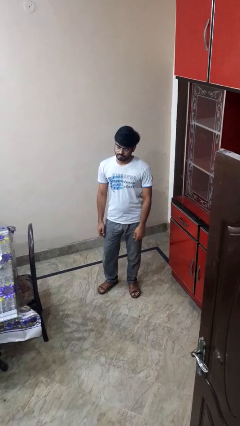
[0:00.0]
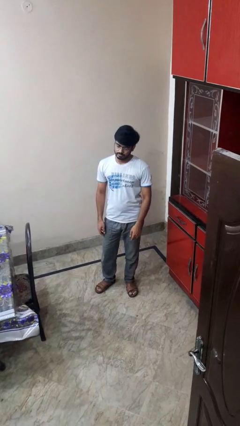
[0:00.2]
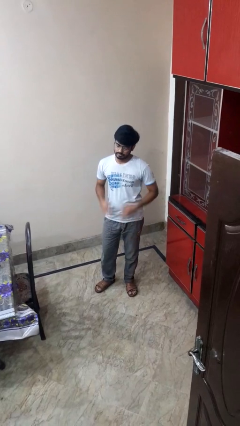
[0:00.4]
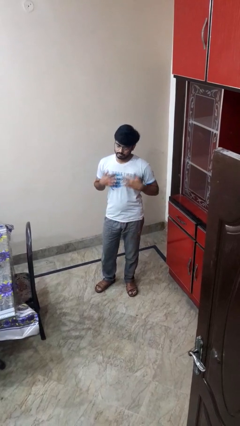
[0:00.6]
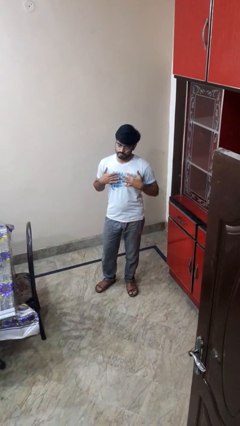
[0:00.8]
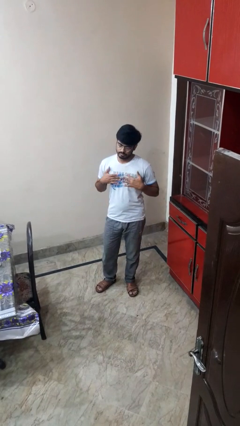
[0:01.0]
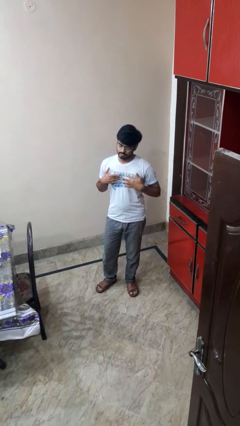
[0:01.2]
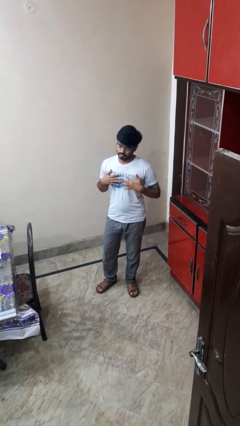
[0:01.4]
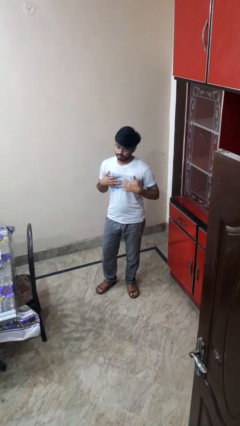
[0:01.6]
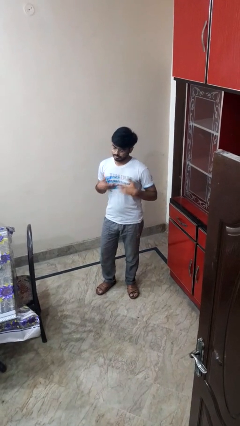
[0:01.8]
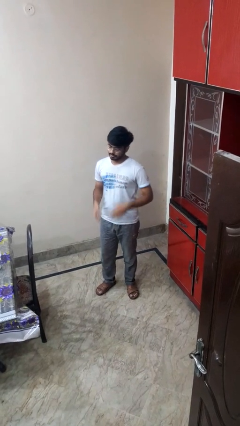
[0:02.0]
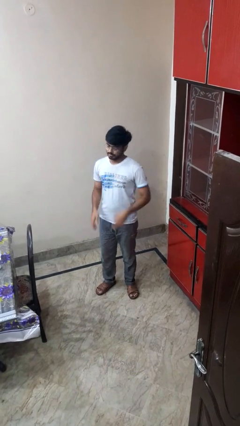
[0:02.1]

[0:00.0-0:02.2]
person drums on chest

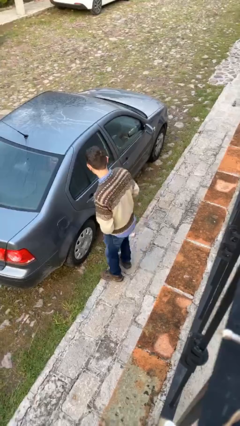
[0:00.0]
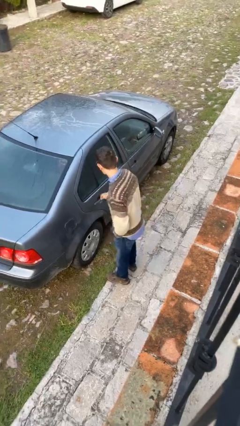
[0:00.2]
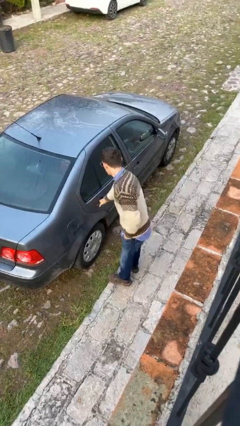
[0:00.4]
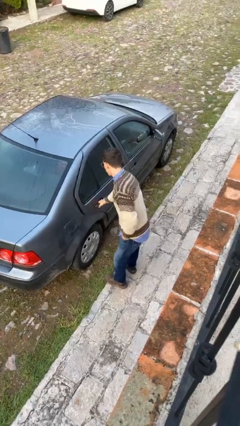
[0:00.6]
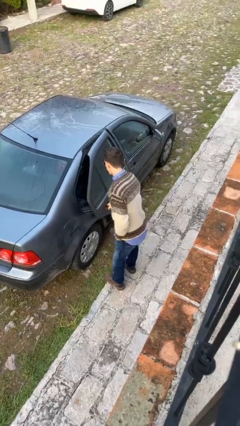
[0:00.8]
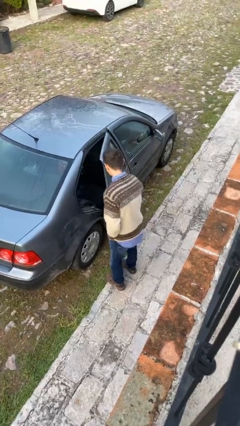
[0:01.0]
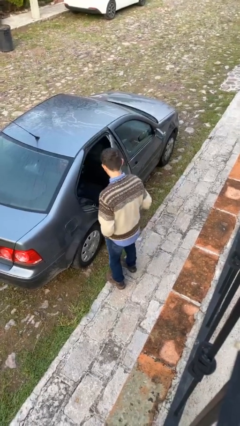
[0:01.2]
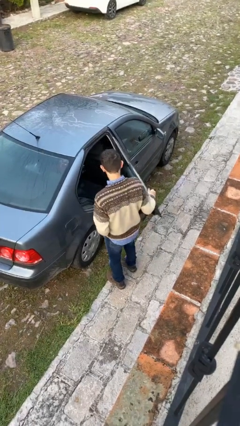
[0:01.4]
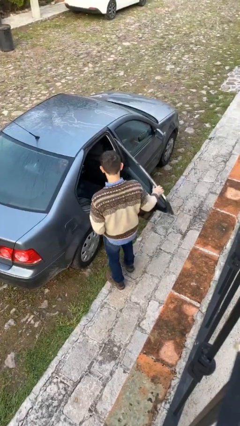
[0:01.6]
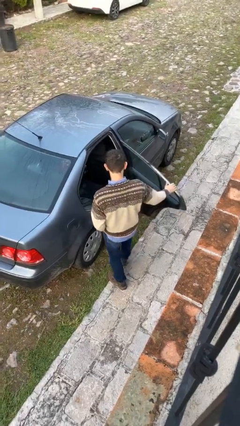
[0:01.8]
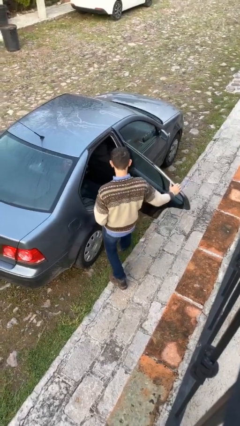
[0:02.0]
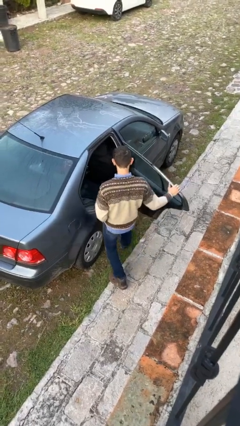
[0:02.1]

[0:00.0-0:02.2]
person opens car door

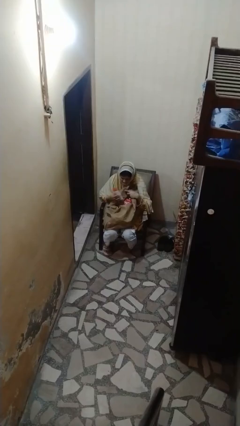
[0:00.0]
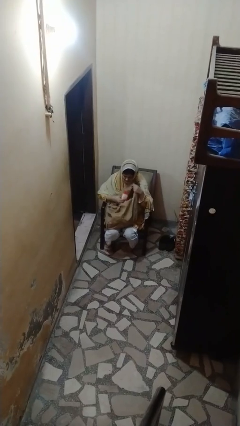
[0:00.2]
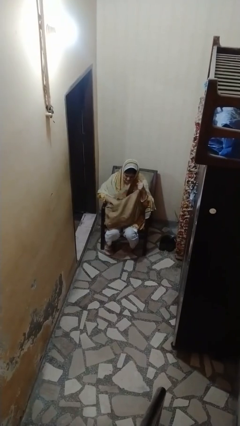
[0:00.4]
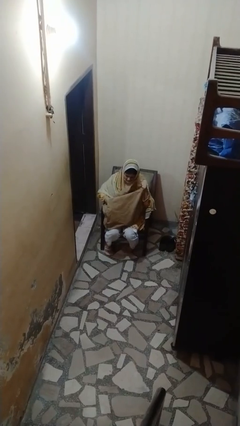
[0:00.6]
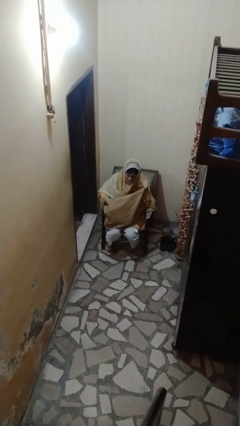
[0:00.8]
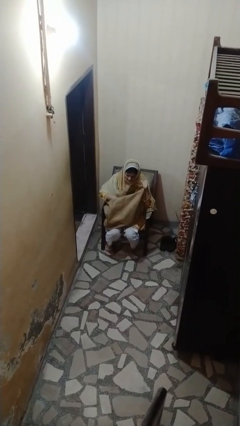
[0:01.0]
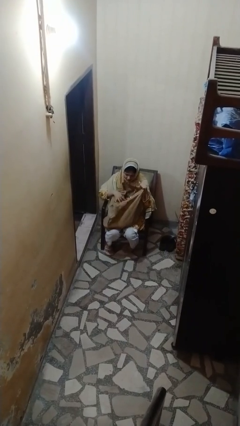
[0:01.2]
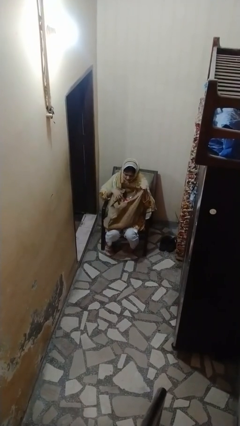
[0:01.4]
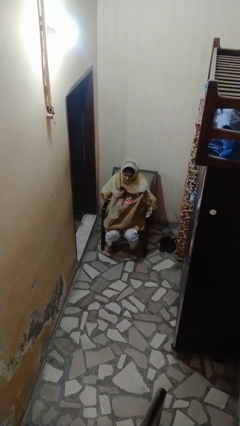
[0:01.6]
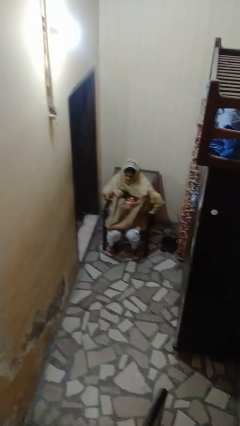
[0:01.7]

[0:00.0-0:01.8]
person puts object into bag

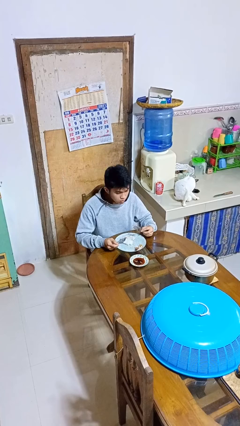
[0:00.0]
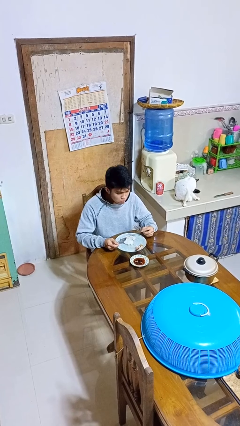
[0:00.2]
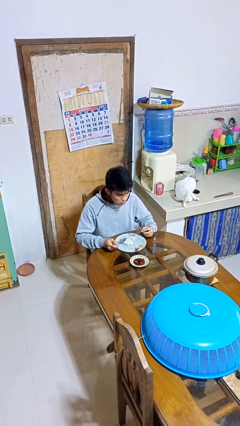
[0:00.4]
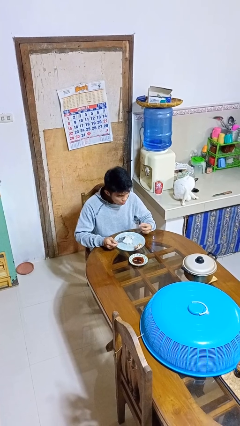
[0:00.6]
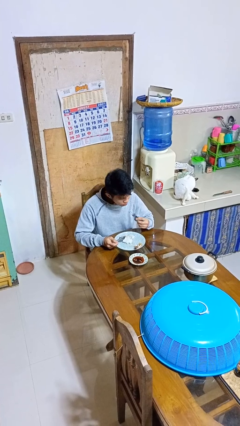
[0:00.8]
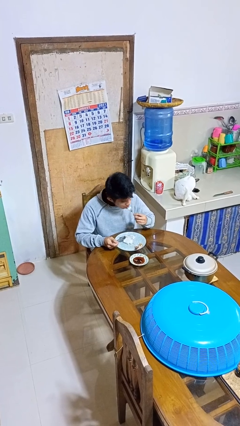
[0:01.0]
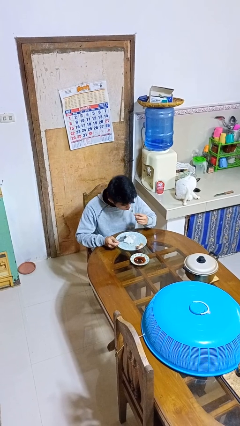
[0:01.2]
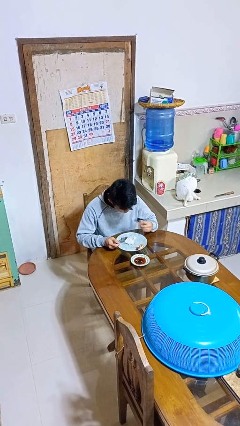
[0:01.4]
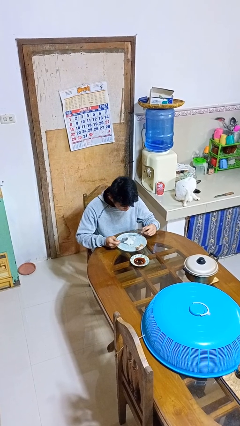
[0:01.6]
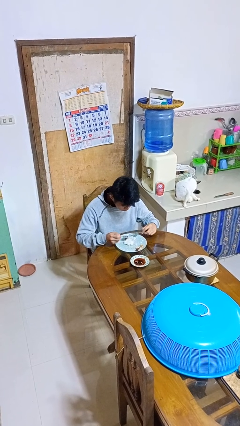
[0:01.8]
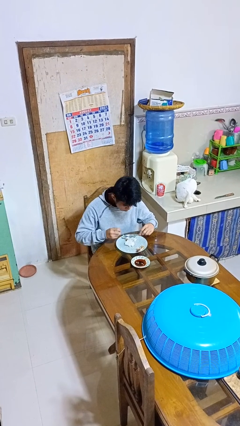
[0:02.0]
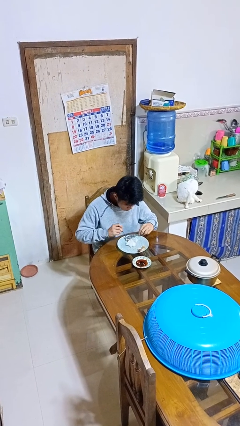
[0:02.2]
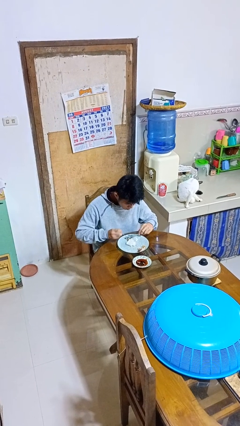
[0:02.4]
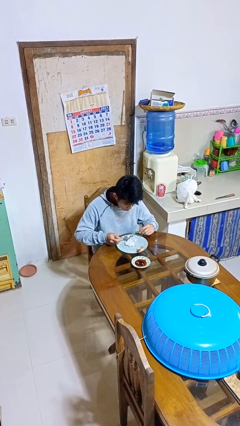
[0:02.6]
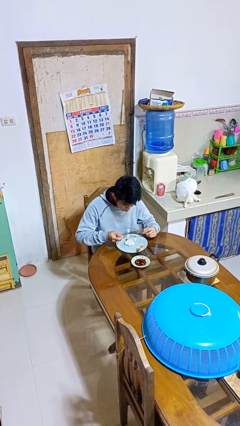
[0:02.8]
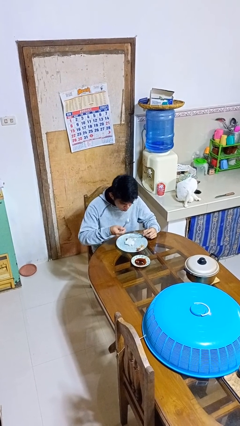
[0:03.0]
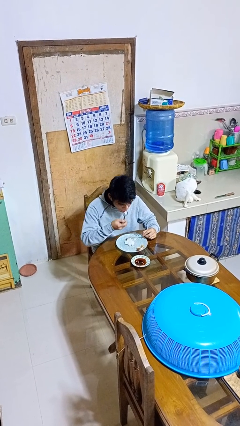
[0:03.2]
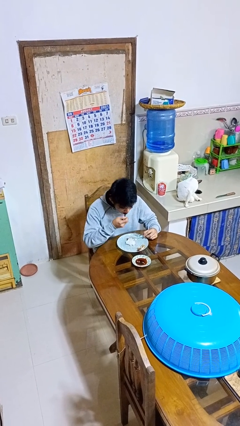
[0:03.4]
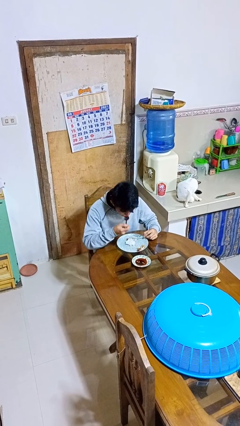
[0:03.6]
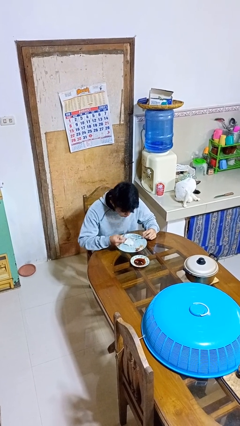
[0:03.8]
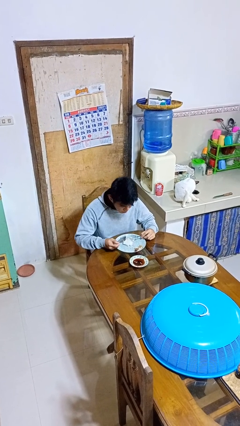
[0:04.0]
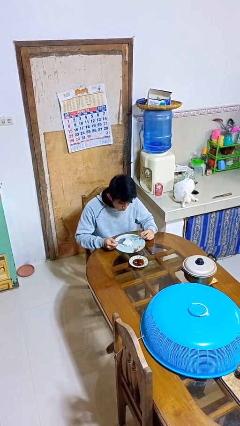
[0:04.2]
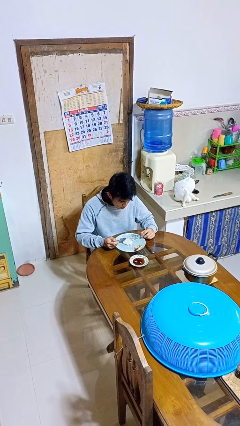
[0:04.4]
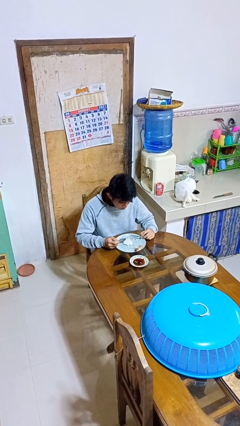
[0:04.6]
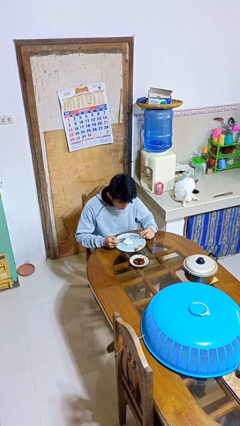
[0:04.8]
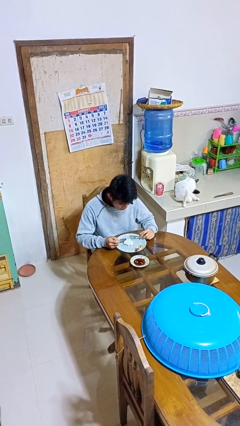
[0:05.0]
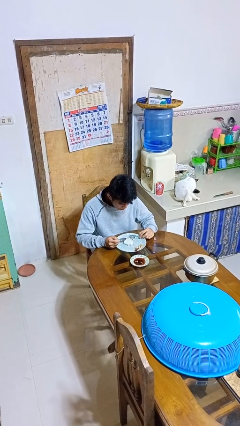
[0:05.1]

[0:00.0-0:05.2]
person eats with utensil

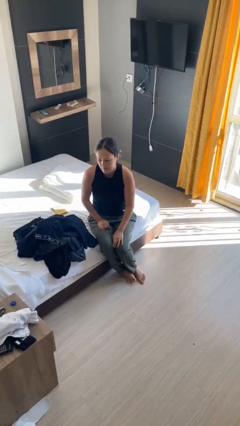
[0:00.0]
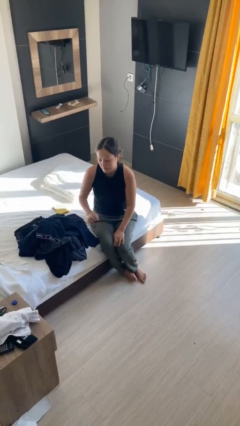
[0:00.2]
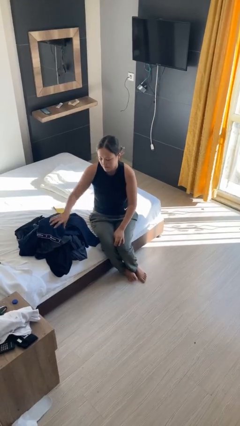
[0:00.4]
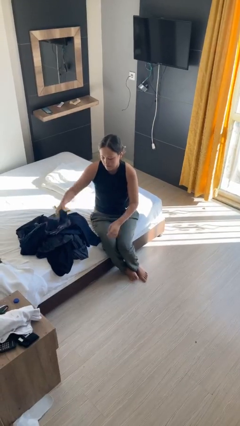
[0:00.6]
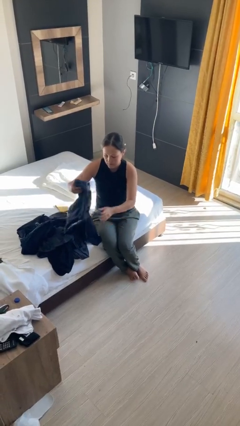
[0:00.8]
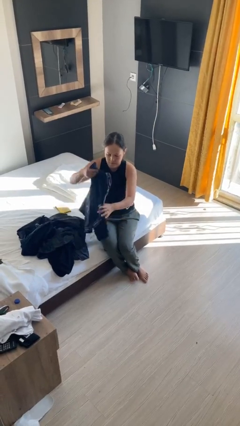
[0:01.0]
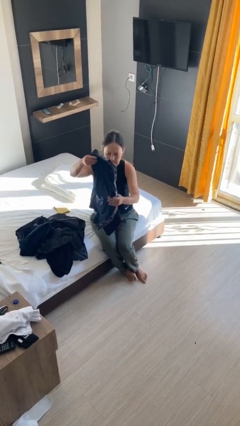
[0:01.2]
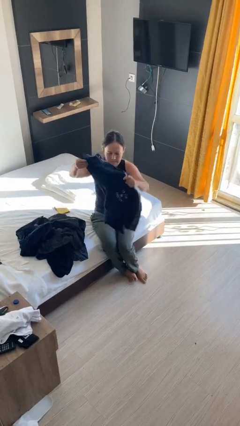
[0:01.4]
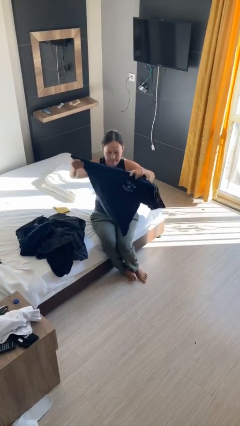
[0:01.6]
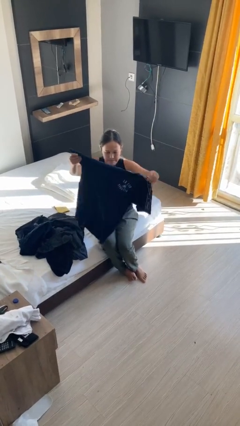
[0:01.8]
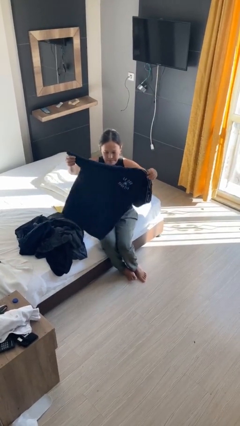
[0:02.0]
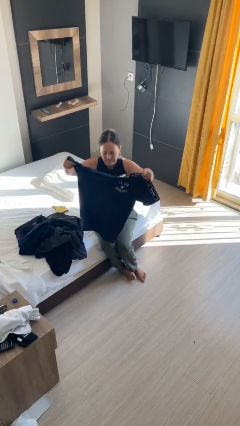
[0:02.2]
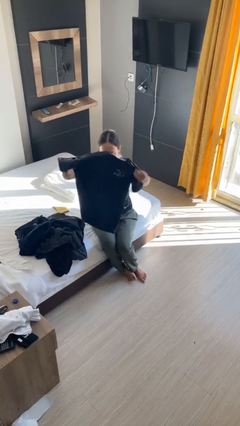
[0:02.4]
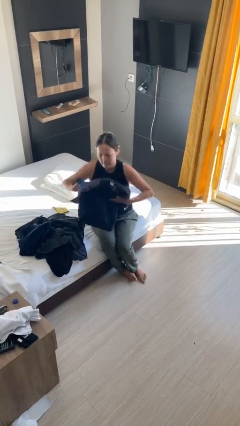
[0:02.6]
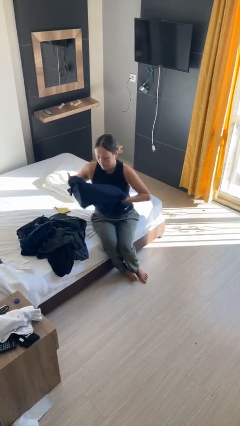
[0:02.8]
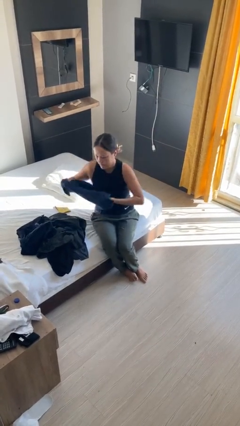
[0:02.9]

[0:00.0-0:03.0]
person folds shirt

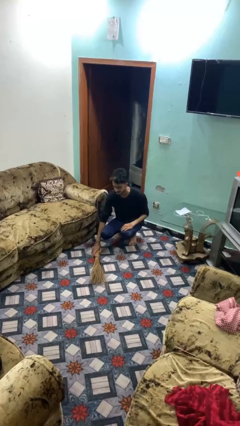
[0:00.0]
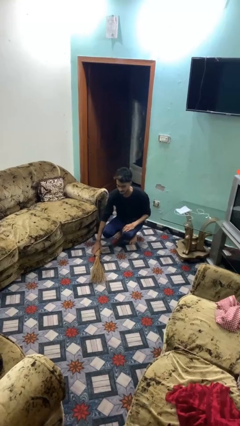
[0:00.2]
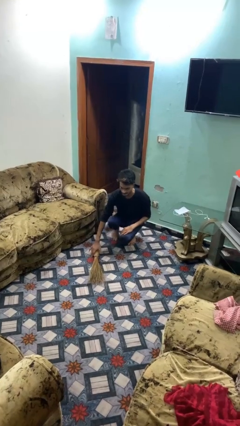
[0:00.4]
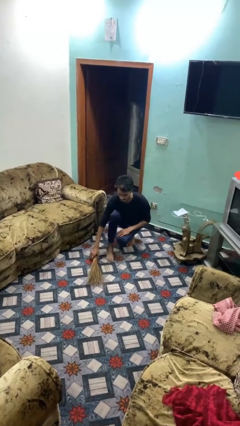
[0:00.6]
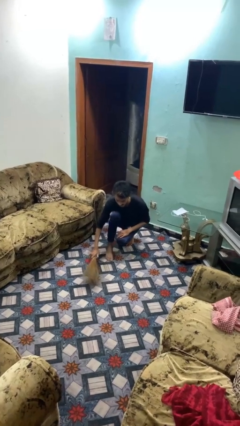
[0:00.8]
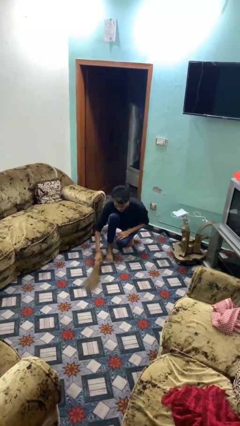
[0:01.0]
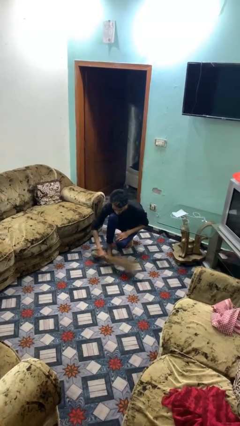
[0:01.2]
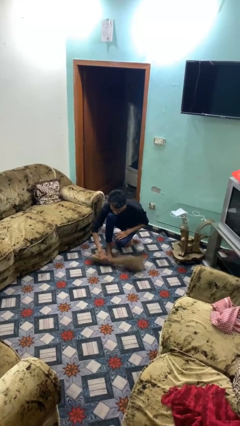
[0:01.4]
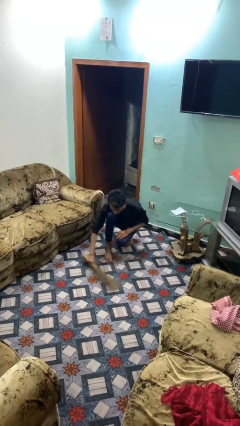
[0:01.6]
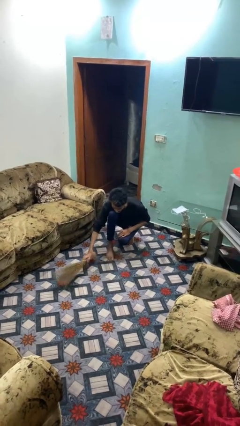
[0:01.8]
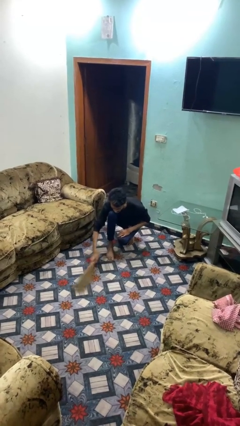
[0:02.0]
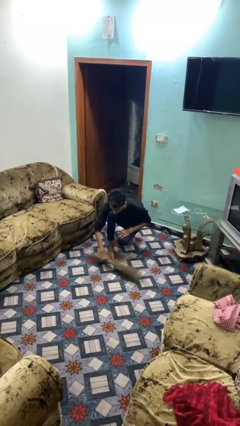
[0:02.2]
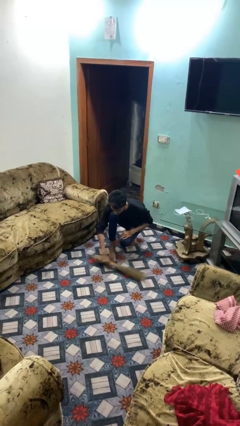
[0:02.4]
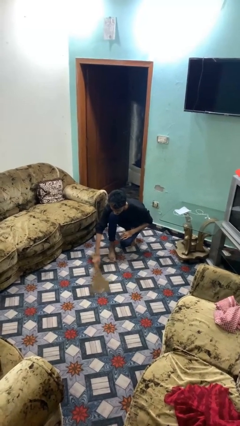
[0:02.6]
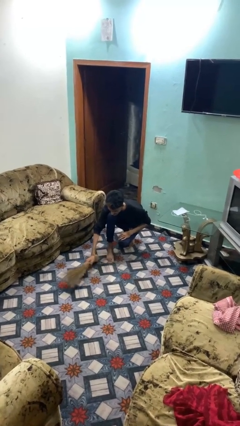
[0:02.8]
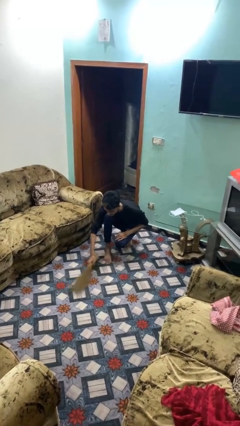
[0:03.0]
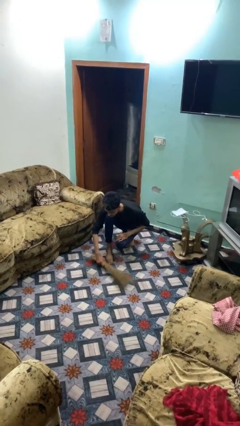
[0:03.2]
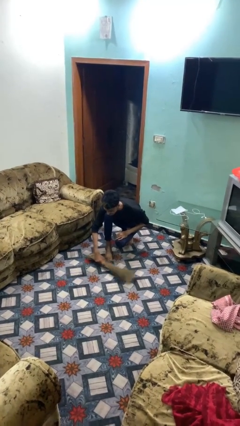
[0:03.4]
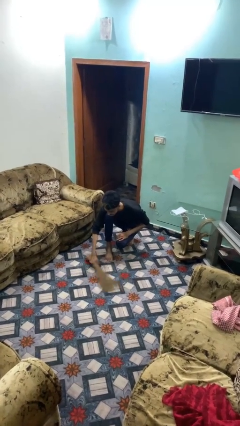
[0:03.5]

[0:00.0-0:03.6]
person sweeps floor
